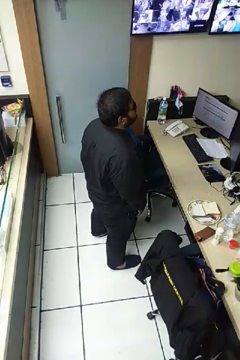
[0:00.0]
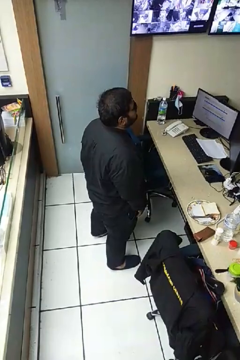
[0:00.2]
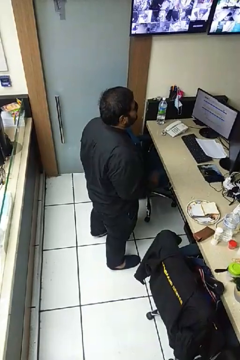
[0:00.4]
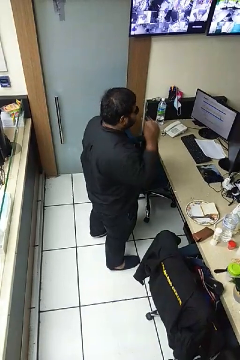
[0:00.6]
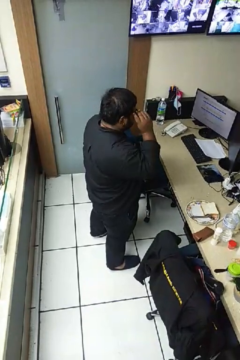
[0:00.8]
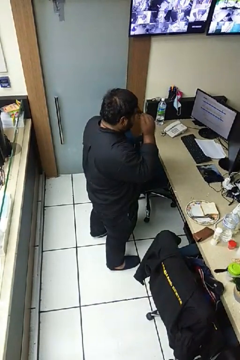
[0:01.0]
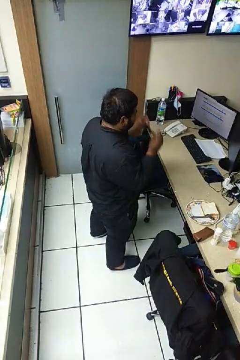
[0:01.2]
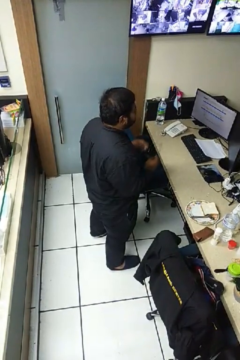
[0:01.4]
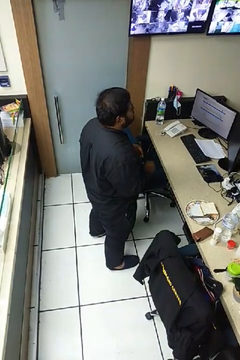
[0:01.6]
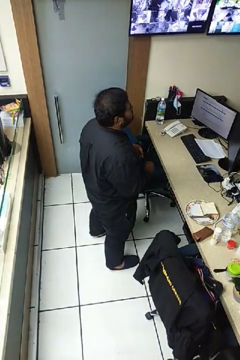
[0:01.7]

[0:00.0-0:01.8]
person takes off sunglasses

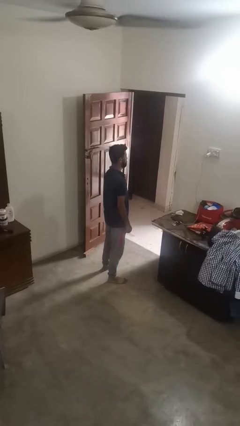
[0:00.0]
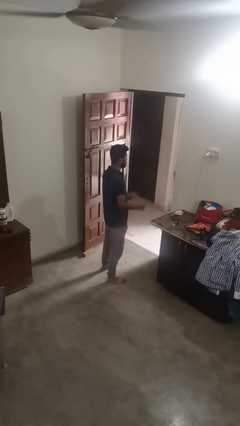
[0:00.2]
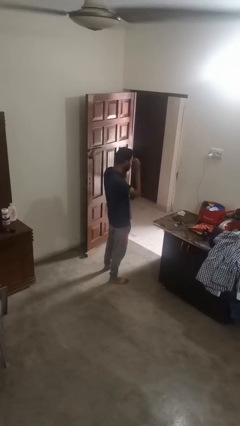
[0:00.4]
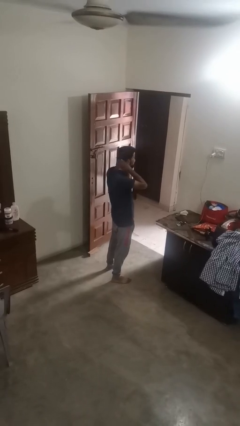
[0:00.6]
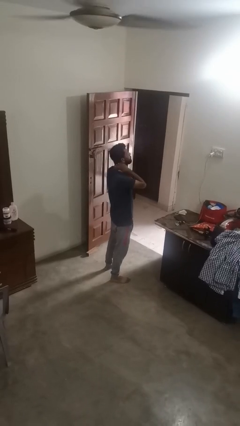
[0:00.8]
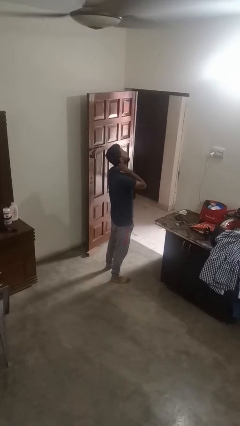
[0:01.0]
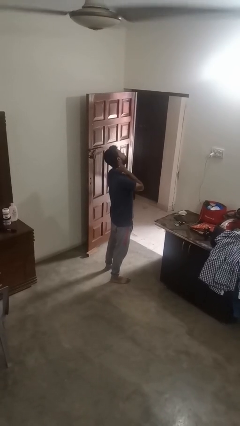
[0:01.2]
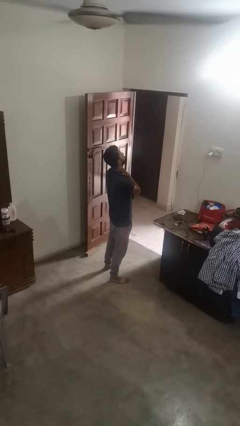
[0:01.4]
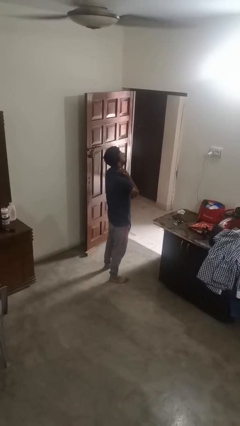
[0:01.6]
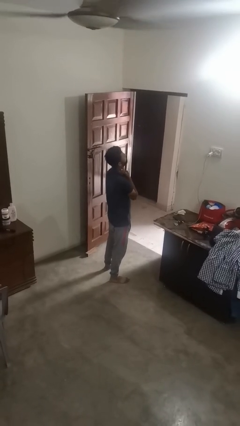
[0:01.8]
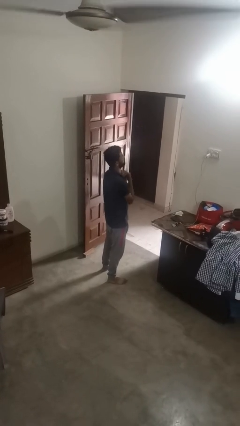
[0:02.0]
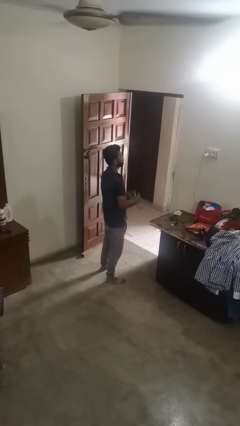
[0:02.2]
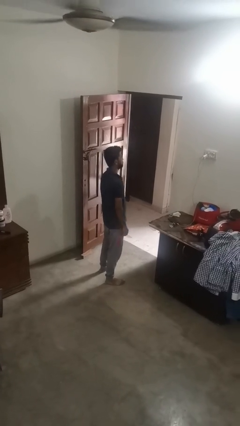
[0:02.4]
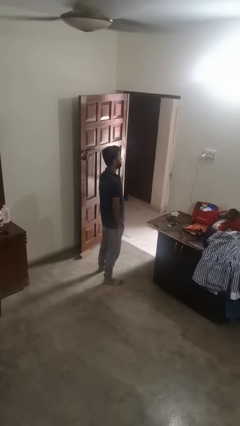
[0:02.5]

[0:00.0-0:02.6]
person rubs neck

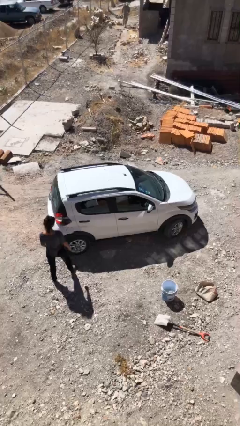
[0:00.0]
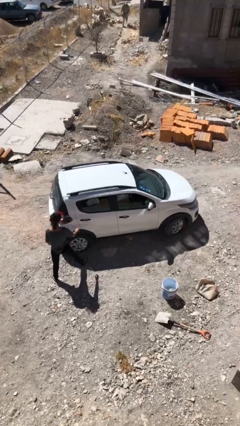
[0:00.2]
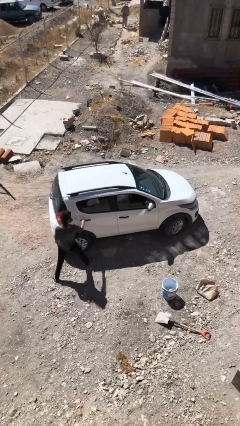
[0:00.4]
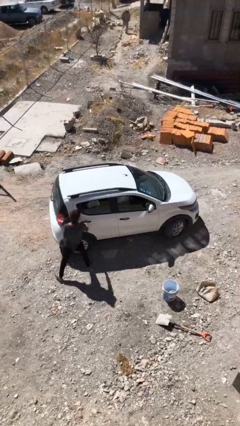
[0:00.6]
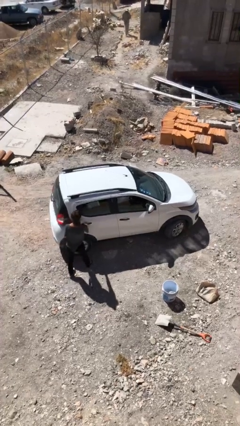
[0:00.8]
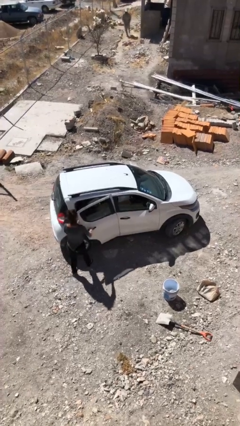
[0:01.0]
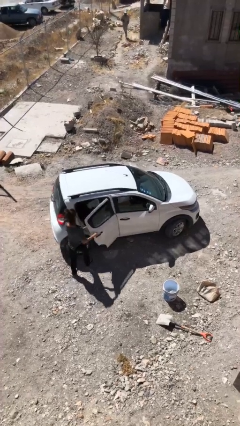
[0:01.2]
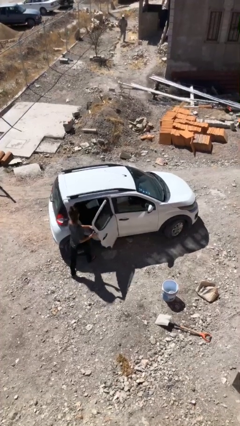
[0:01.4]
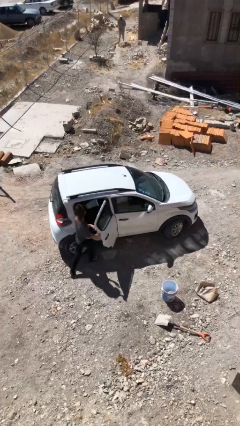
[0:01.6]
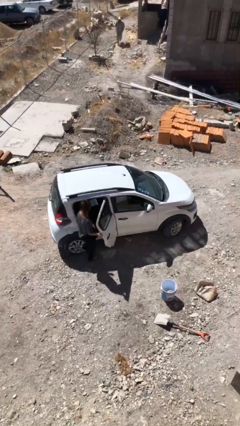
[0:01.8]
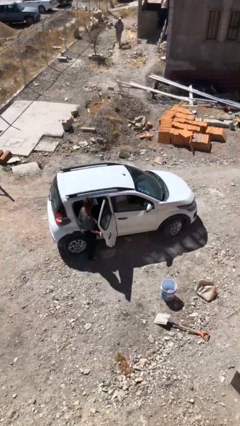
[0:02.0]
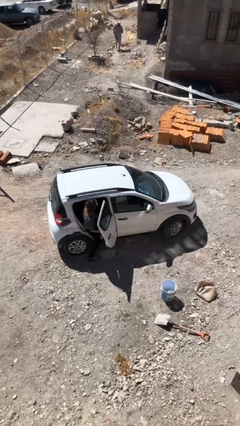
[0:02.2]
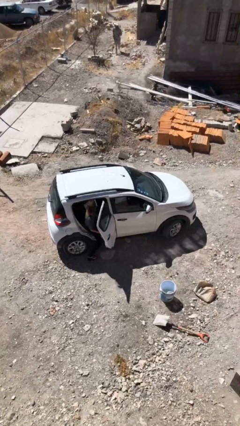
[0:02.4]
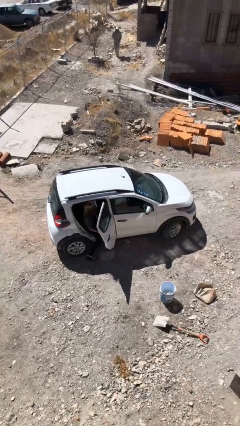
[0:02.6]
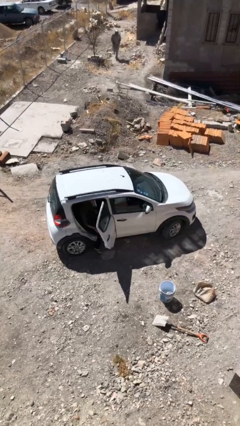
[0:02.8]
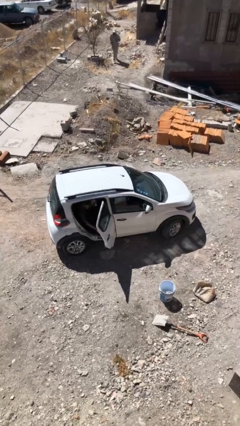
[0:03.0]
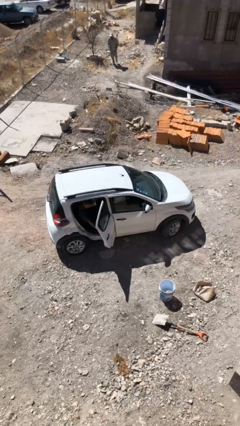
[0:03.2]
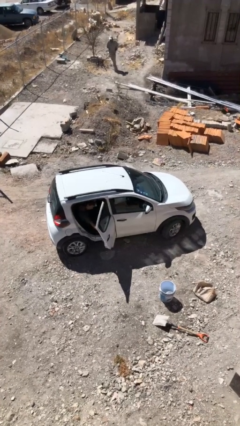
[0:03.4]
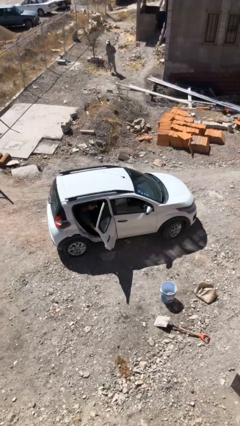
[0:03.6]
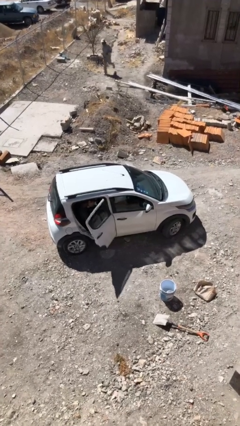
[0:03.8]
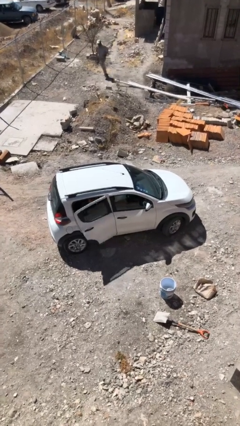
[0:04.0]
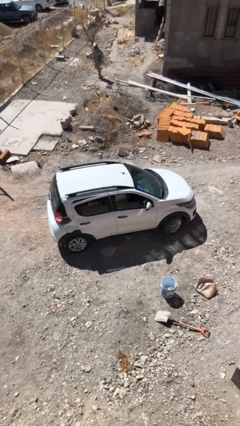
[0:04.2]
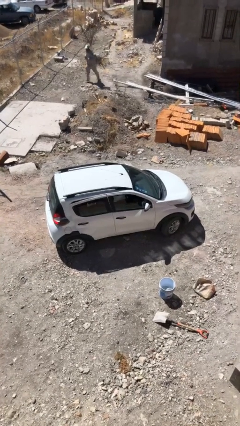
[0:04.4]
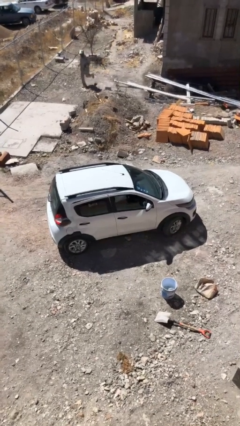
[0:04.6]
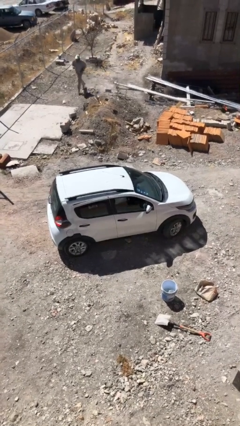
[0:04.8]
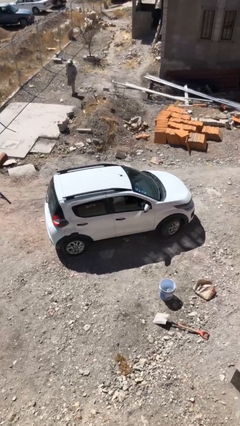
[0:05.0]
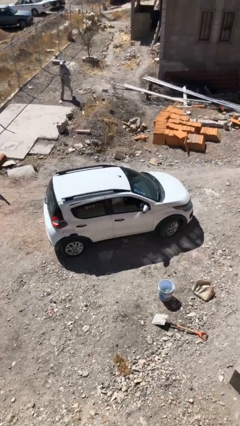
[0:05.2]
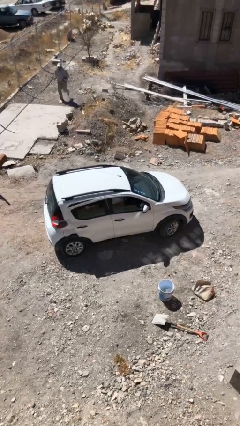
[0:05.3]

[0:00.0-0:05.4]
car picks up person

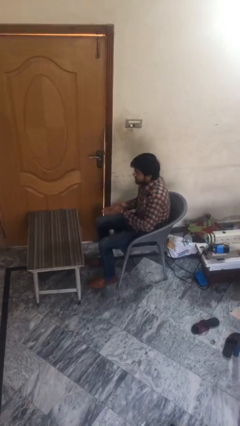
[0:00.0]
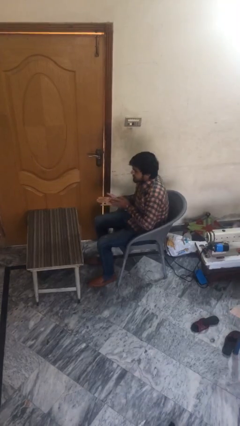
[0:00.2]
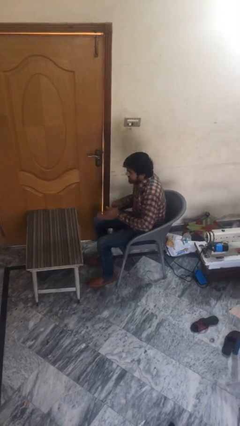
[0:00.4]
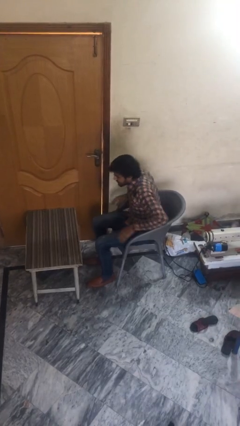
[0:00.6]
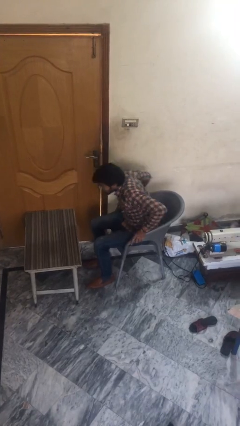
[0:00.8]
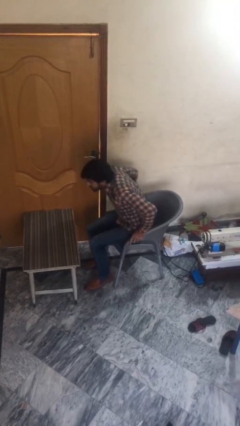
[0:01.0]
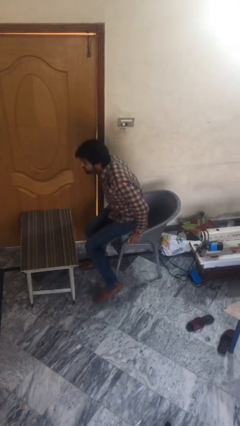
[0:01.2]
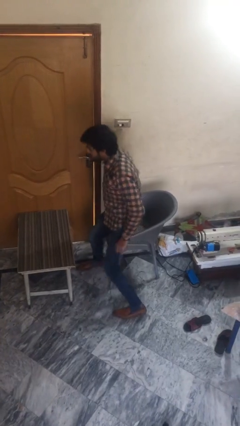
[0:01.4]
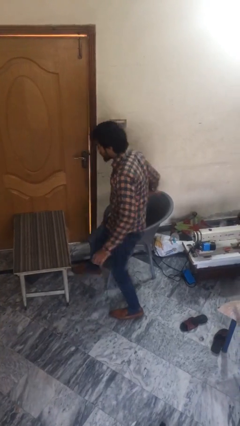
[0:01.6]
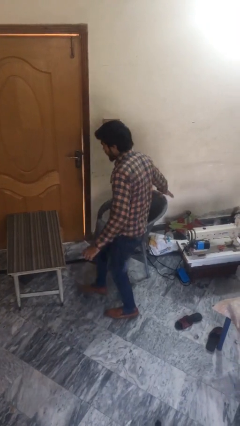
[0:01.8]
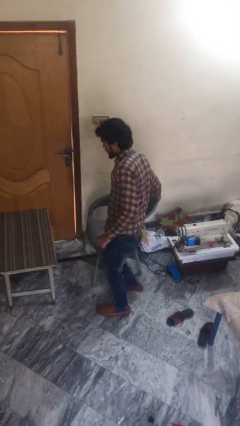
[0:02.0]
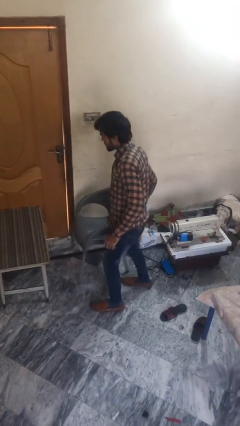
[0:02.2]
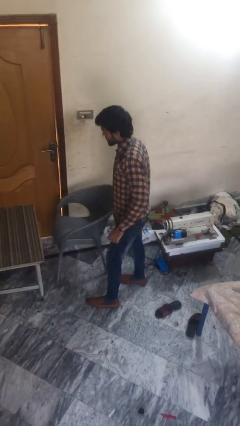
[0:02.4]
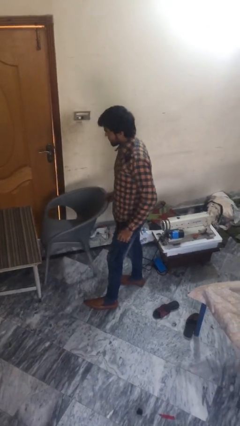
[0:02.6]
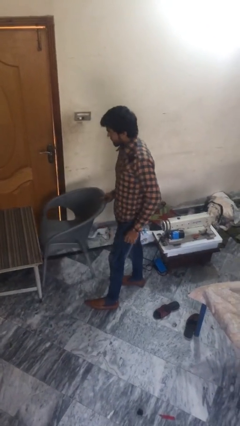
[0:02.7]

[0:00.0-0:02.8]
person stands up

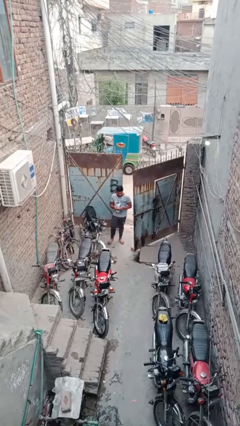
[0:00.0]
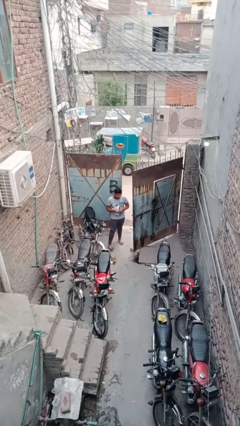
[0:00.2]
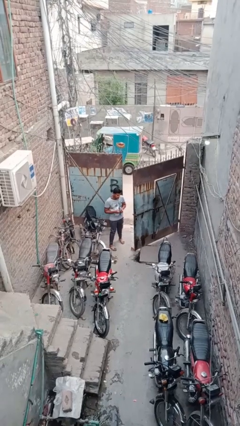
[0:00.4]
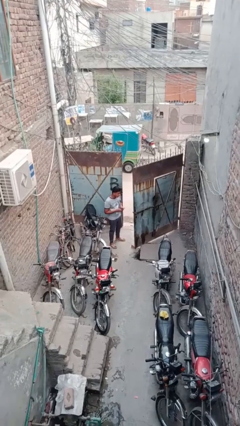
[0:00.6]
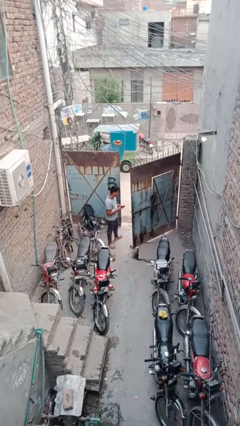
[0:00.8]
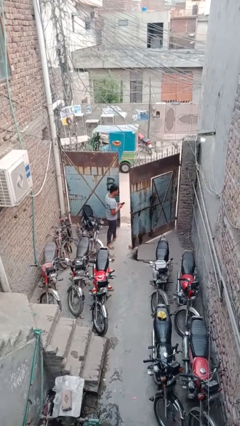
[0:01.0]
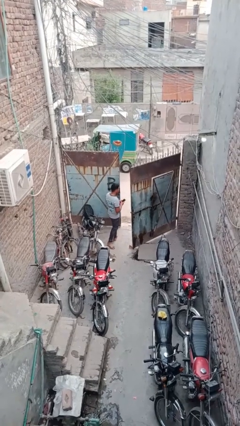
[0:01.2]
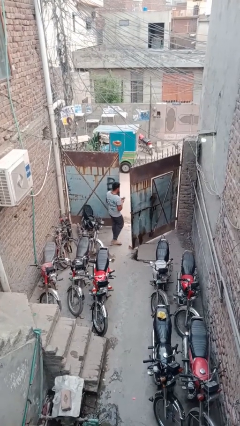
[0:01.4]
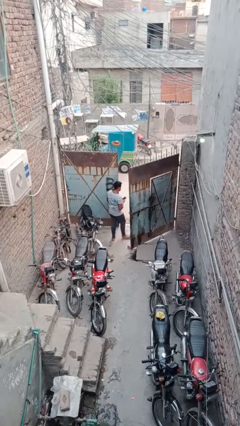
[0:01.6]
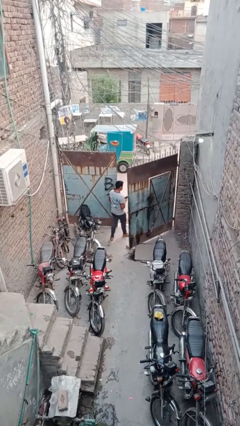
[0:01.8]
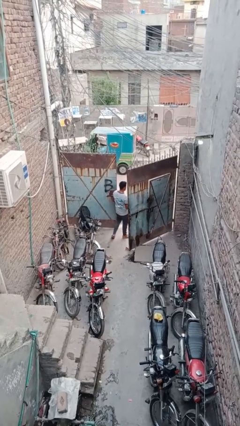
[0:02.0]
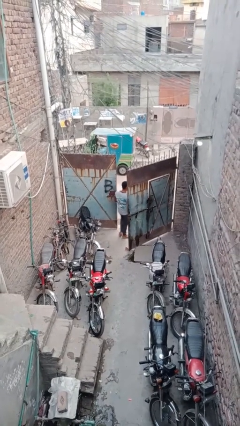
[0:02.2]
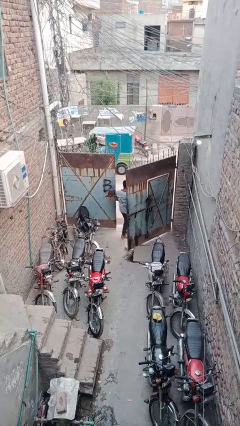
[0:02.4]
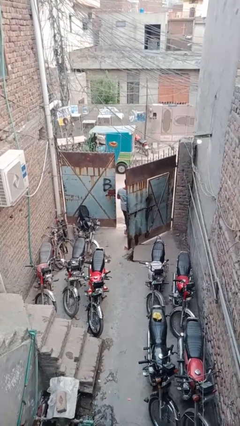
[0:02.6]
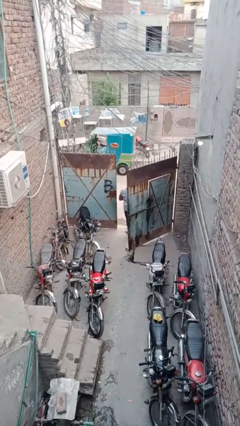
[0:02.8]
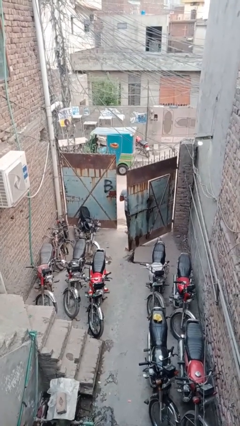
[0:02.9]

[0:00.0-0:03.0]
person exits scene through structure

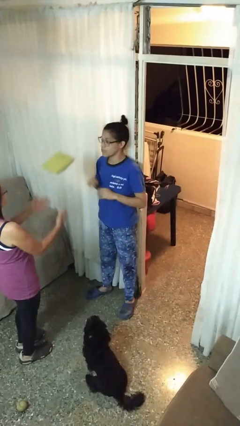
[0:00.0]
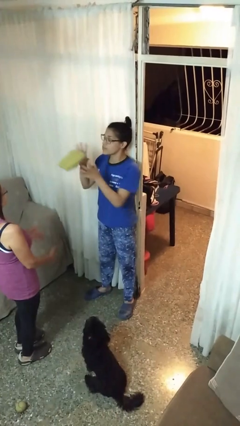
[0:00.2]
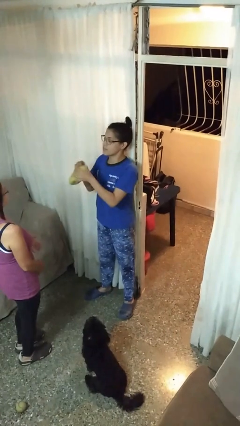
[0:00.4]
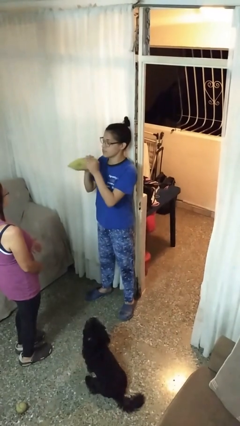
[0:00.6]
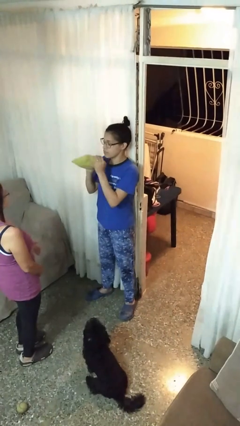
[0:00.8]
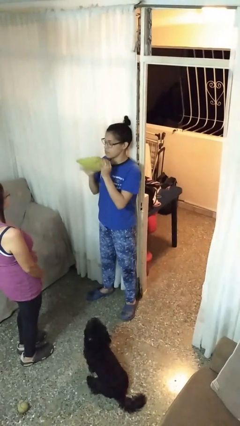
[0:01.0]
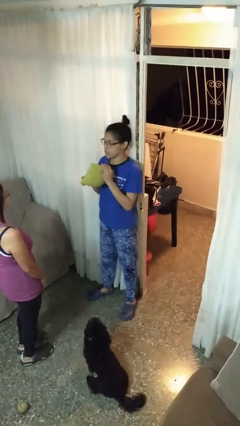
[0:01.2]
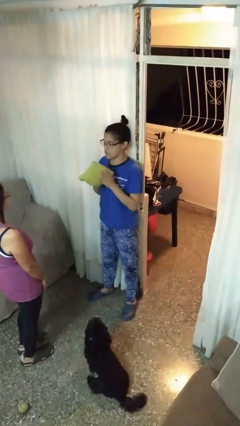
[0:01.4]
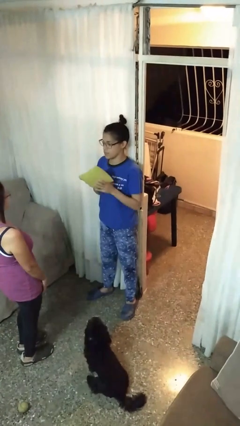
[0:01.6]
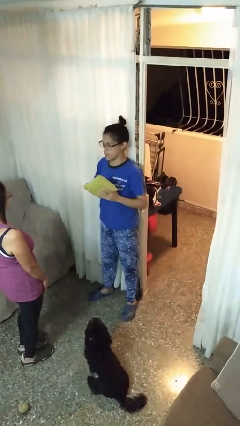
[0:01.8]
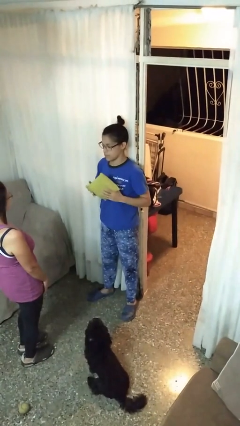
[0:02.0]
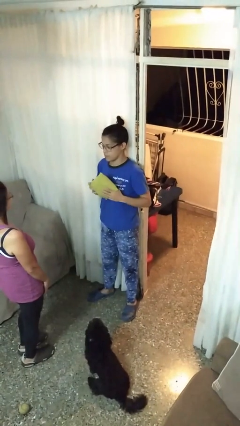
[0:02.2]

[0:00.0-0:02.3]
person catches object from person
